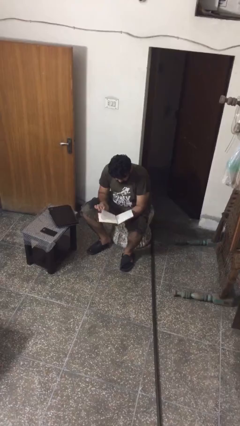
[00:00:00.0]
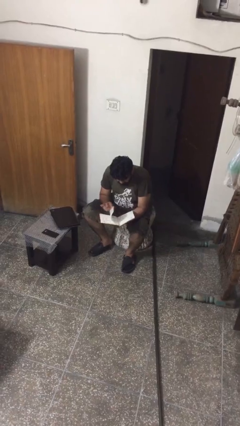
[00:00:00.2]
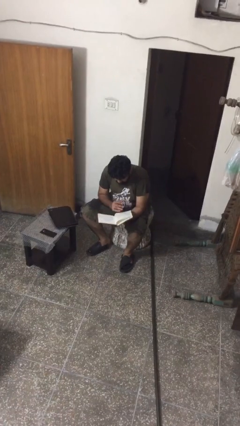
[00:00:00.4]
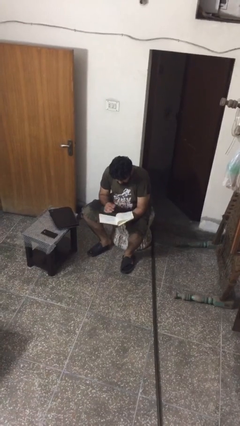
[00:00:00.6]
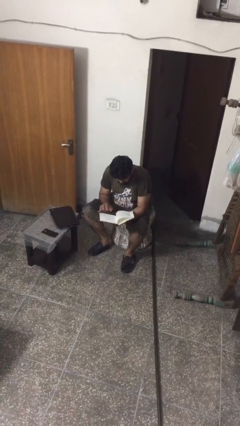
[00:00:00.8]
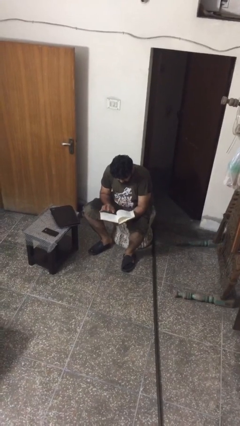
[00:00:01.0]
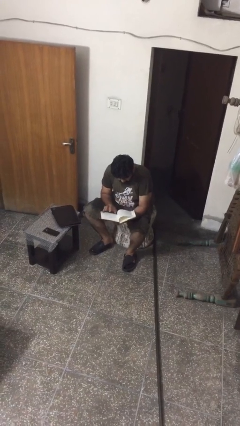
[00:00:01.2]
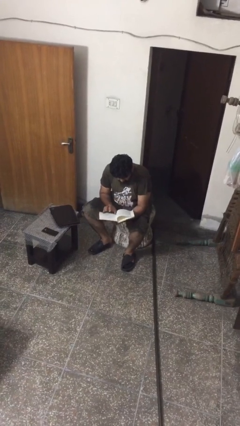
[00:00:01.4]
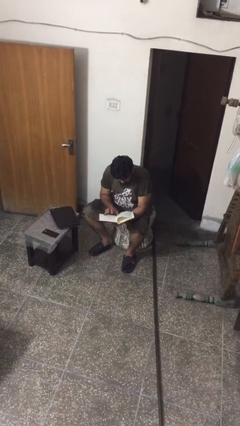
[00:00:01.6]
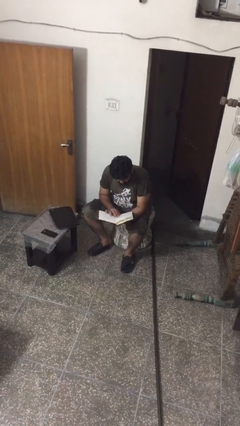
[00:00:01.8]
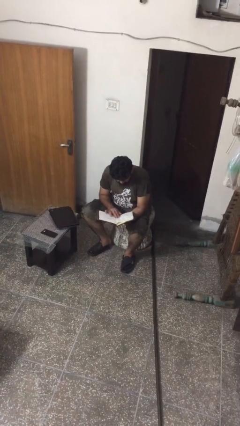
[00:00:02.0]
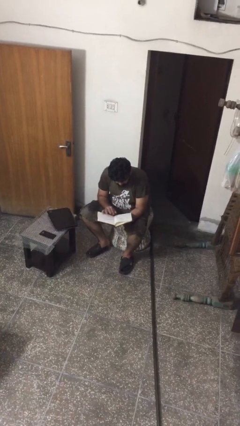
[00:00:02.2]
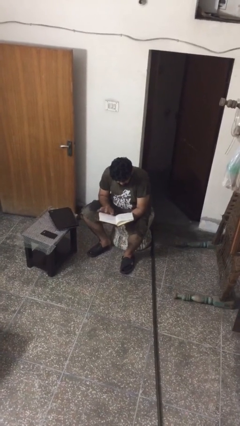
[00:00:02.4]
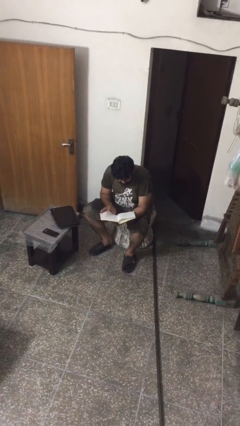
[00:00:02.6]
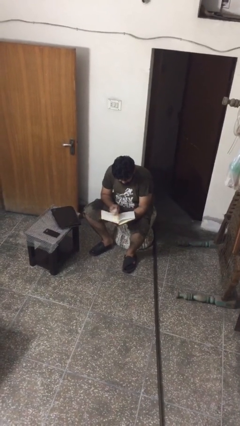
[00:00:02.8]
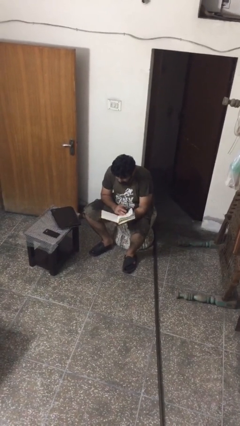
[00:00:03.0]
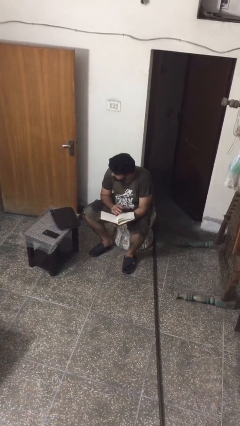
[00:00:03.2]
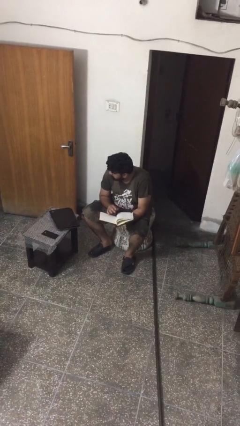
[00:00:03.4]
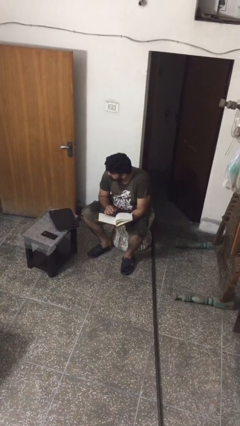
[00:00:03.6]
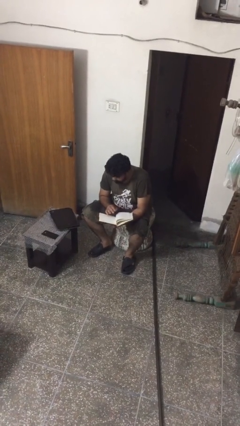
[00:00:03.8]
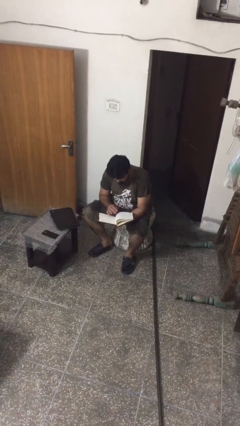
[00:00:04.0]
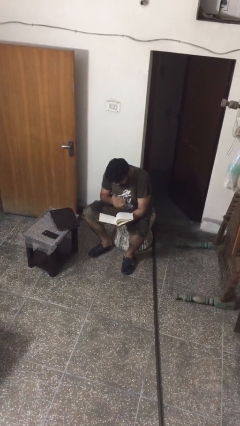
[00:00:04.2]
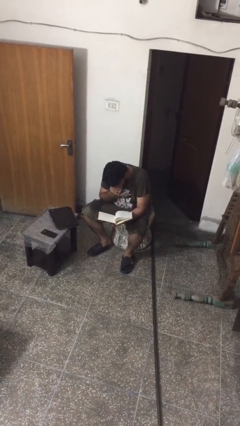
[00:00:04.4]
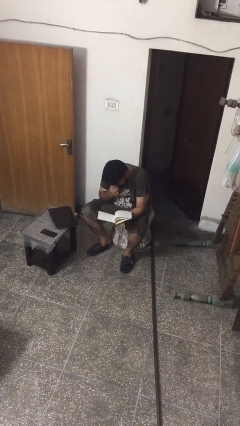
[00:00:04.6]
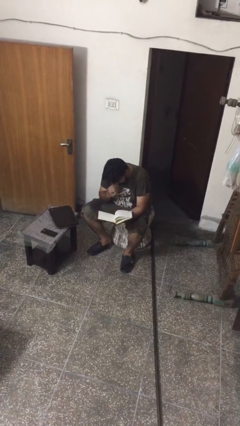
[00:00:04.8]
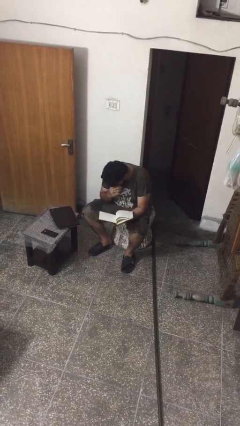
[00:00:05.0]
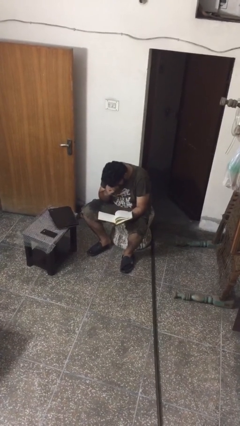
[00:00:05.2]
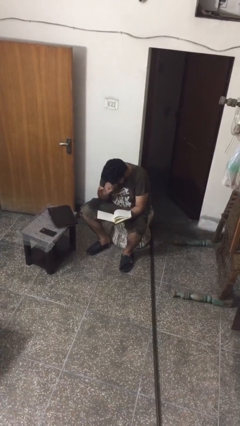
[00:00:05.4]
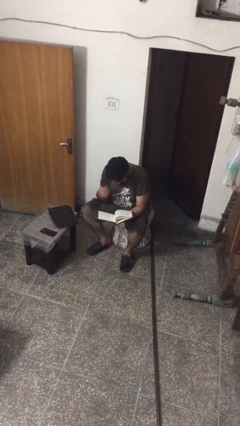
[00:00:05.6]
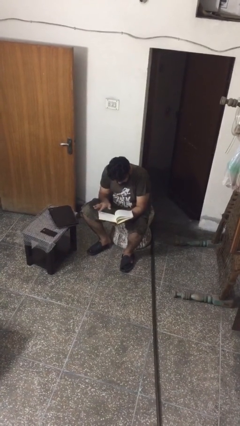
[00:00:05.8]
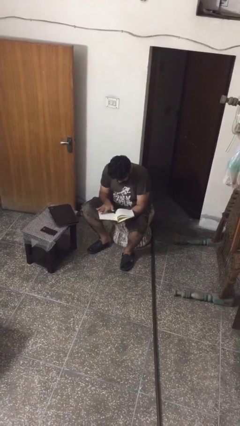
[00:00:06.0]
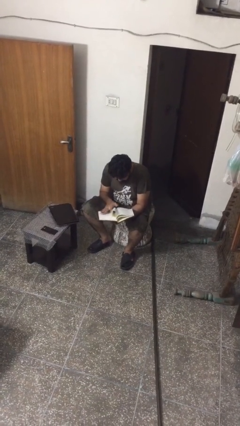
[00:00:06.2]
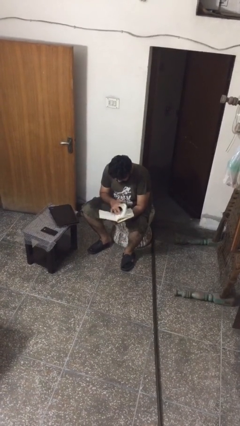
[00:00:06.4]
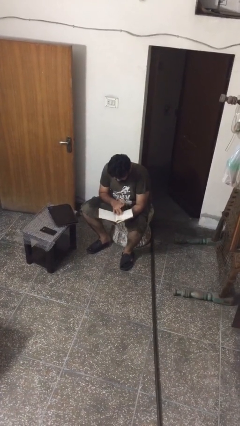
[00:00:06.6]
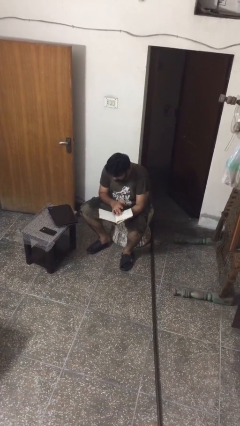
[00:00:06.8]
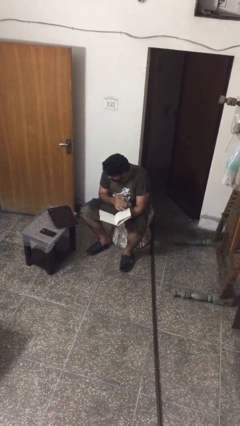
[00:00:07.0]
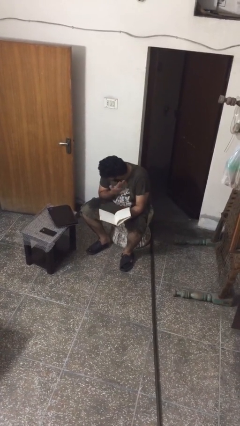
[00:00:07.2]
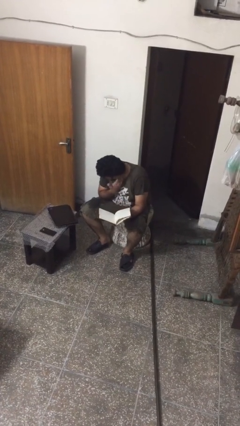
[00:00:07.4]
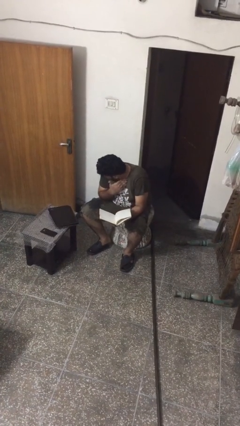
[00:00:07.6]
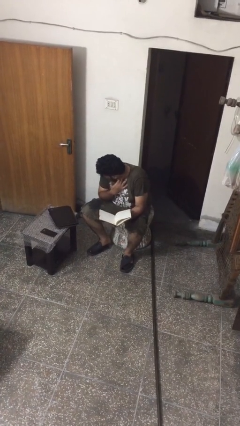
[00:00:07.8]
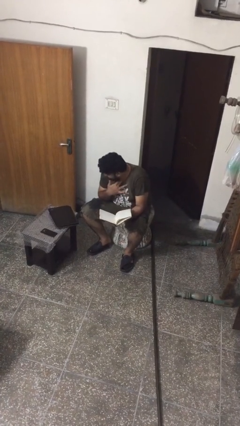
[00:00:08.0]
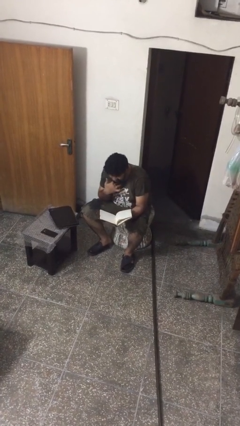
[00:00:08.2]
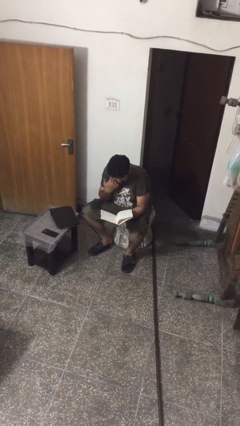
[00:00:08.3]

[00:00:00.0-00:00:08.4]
person reads document

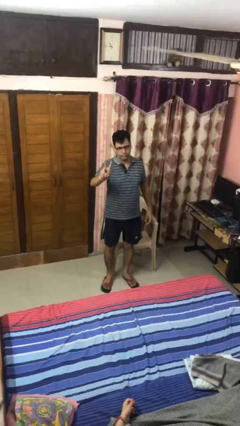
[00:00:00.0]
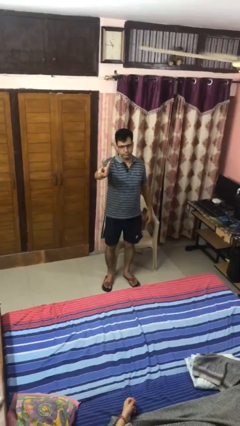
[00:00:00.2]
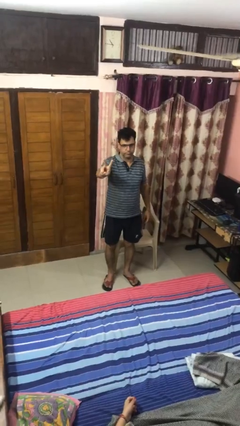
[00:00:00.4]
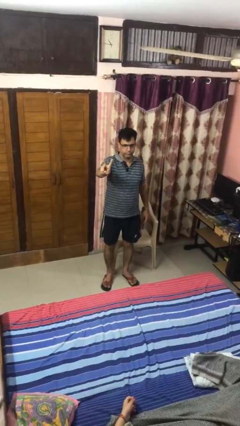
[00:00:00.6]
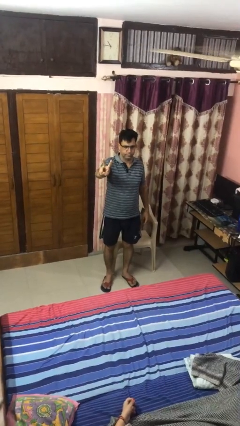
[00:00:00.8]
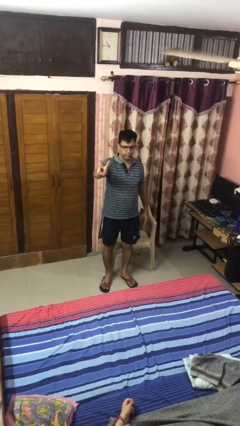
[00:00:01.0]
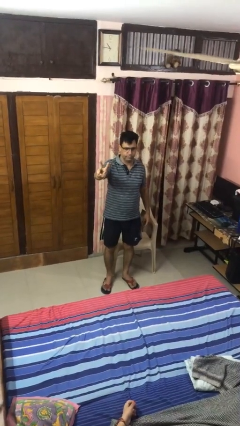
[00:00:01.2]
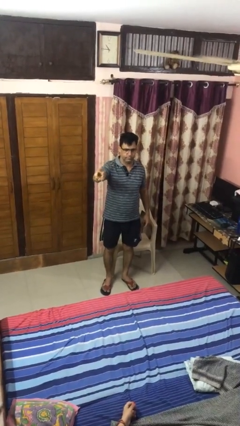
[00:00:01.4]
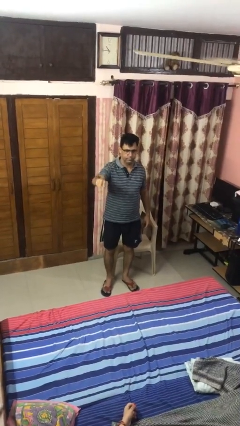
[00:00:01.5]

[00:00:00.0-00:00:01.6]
person gestures peace

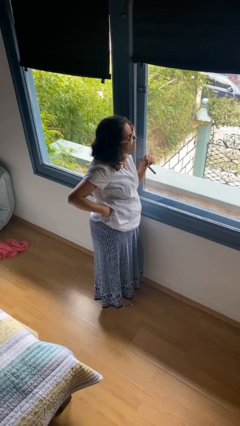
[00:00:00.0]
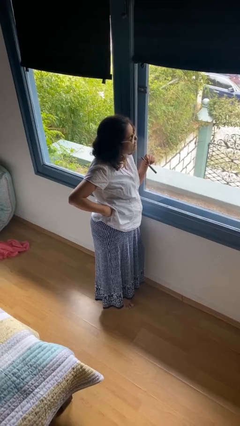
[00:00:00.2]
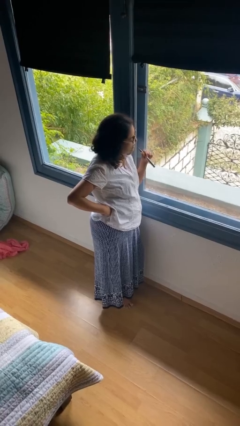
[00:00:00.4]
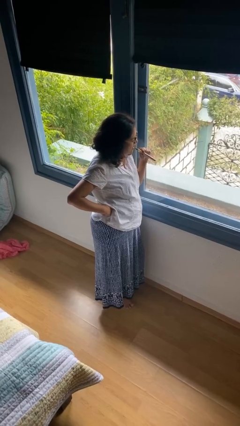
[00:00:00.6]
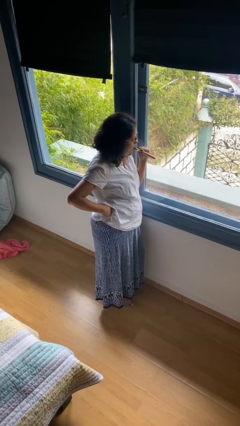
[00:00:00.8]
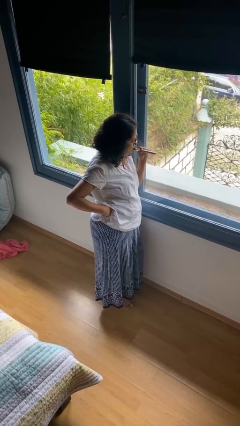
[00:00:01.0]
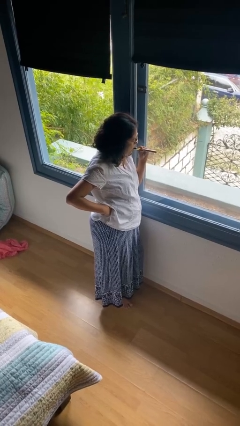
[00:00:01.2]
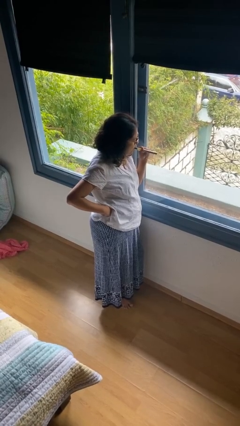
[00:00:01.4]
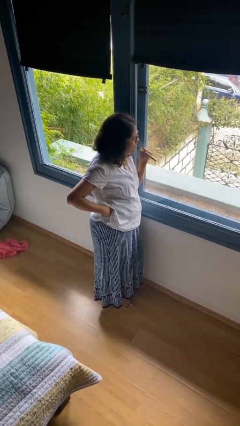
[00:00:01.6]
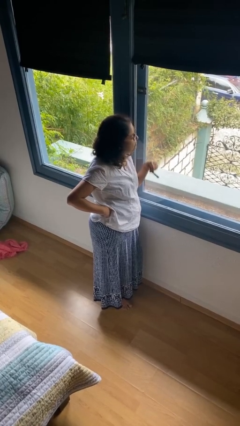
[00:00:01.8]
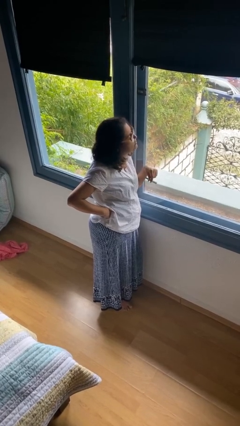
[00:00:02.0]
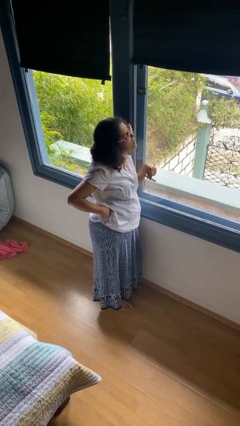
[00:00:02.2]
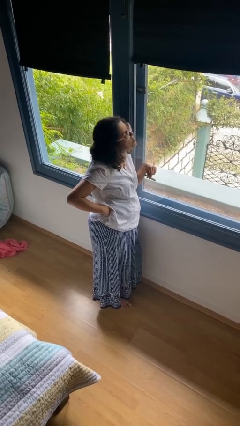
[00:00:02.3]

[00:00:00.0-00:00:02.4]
person vapes

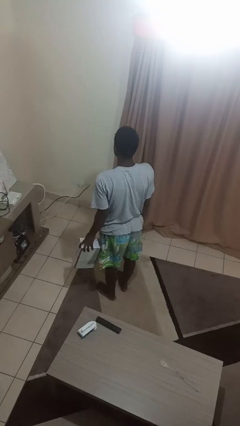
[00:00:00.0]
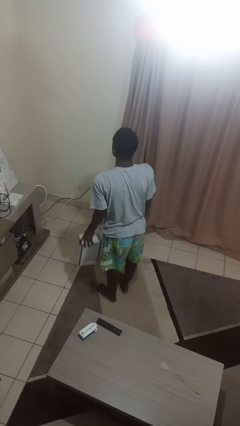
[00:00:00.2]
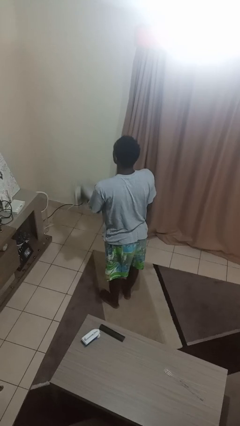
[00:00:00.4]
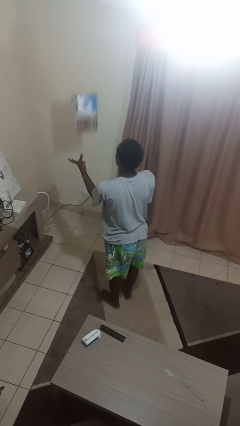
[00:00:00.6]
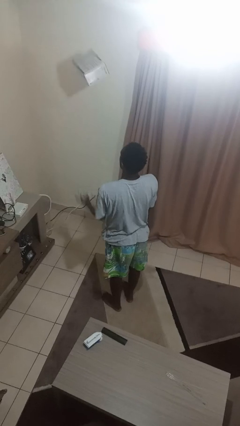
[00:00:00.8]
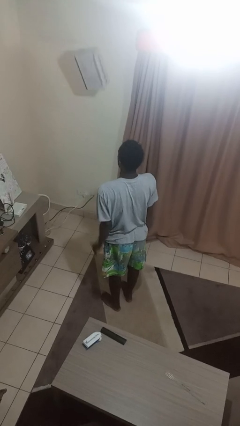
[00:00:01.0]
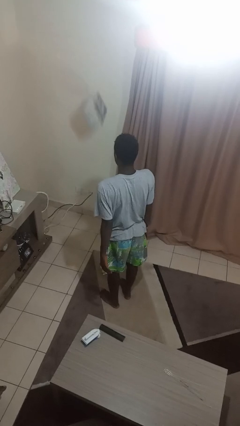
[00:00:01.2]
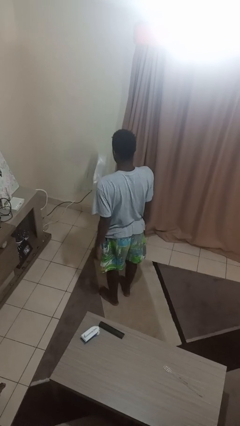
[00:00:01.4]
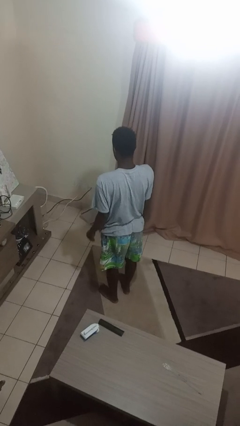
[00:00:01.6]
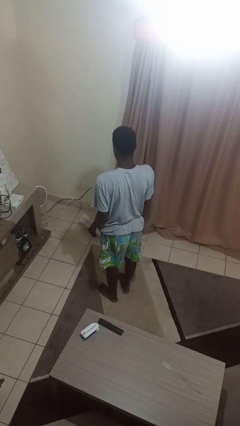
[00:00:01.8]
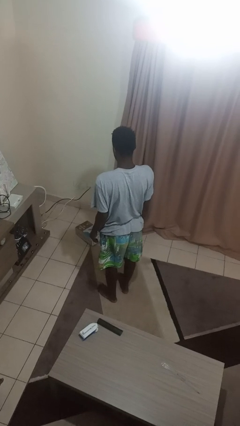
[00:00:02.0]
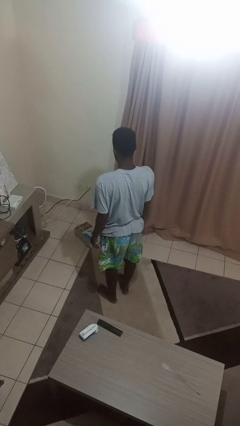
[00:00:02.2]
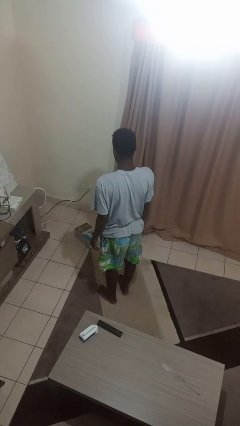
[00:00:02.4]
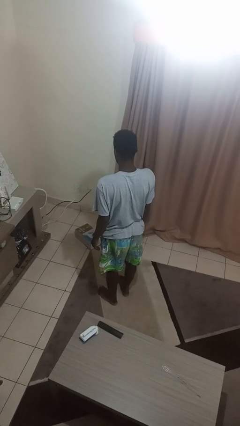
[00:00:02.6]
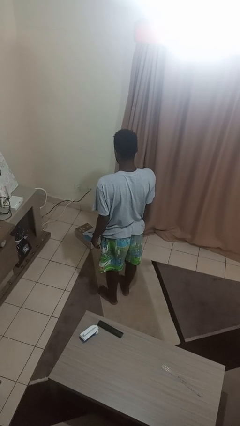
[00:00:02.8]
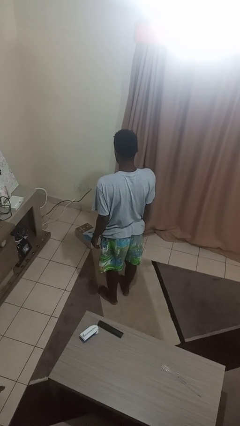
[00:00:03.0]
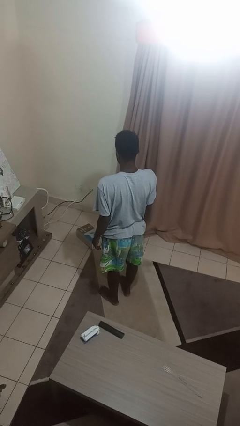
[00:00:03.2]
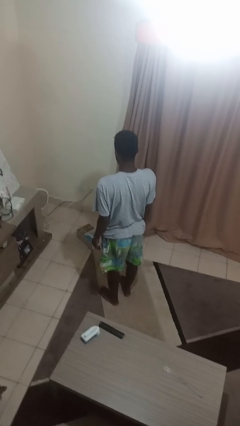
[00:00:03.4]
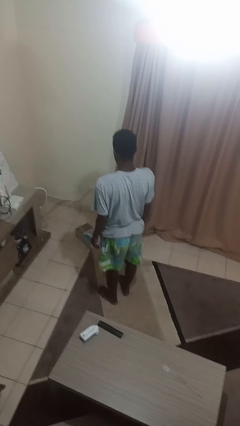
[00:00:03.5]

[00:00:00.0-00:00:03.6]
person throws object into air

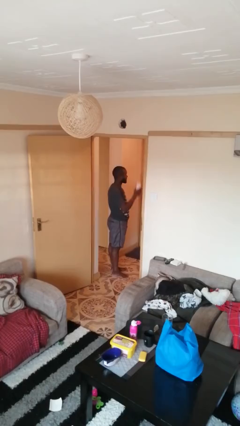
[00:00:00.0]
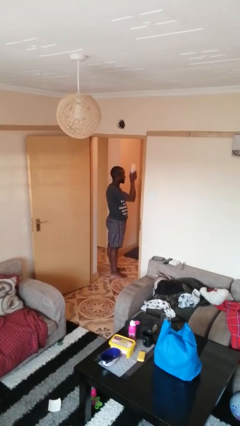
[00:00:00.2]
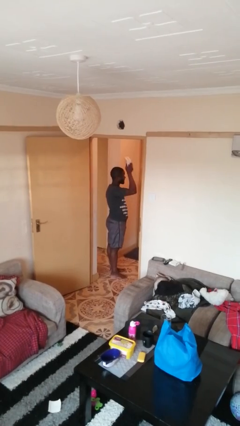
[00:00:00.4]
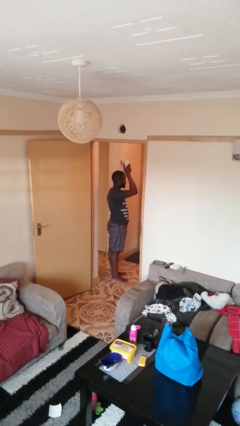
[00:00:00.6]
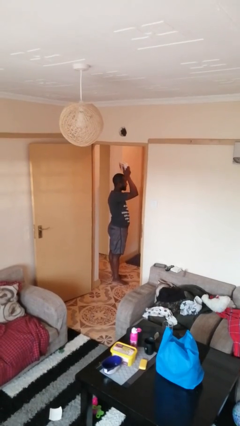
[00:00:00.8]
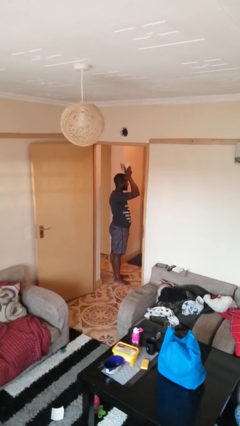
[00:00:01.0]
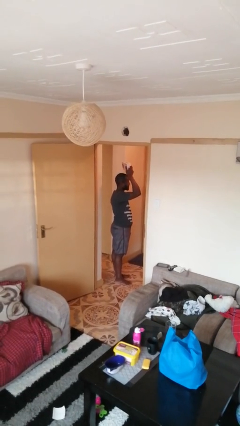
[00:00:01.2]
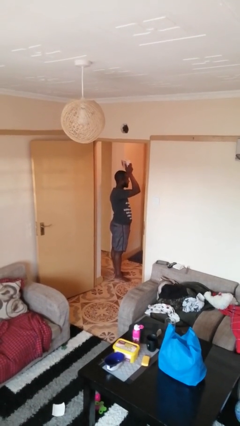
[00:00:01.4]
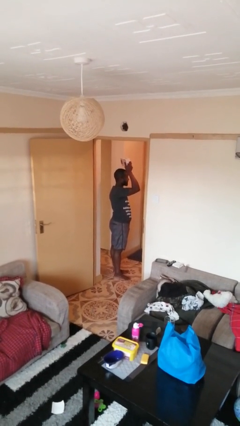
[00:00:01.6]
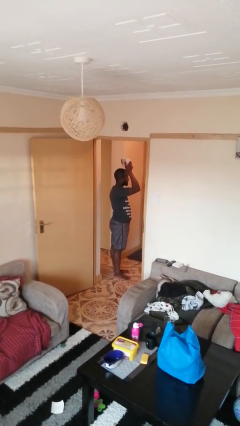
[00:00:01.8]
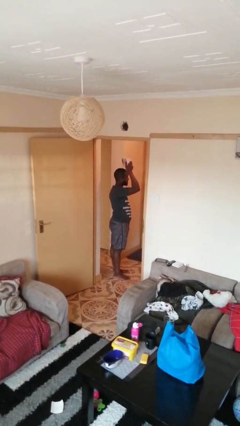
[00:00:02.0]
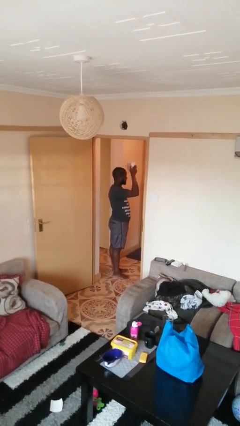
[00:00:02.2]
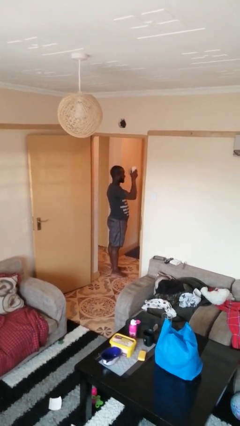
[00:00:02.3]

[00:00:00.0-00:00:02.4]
person holds object above head
